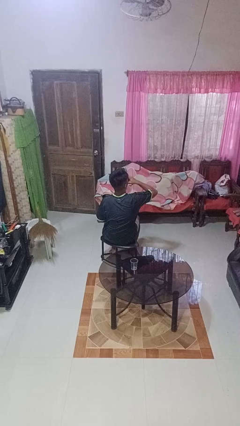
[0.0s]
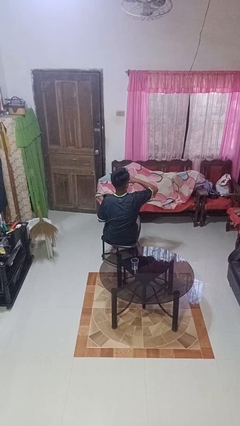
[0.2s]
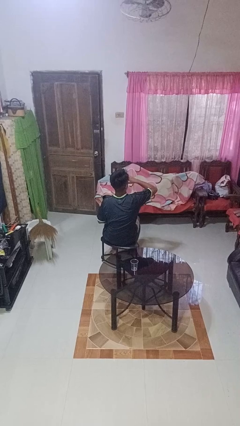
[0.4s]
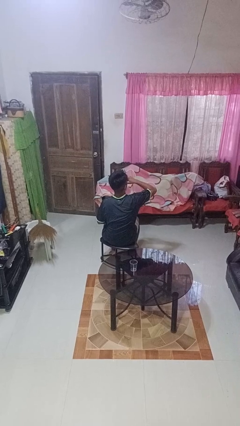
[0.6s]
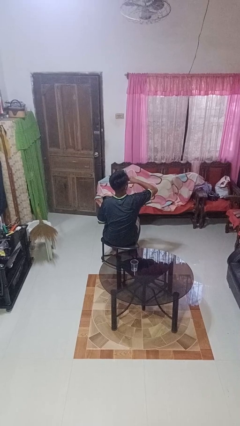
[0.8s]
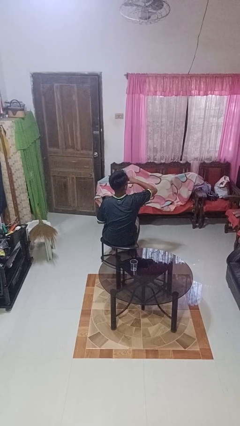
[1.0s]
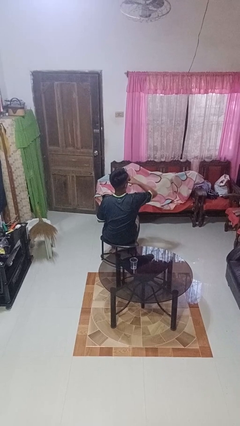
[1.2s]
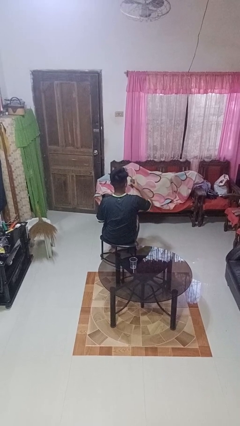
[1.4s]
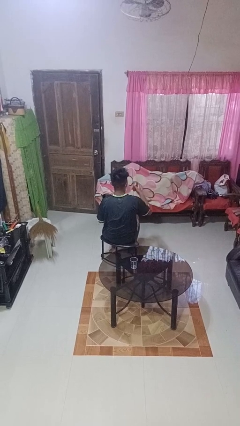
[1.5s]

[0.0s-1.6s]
person drinks from beverage can

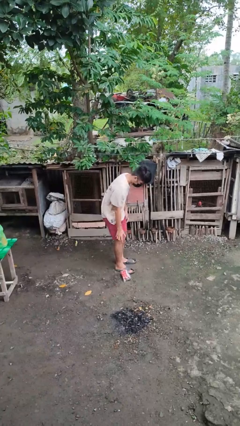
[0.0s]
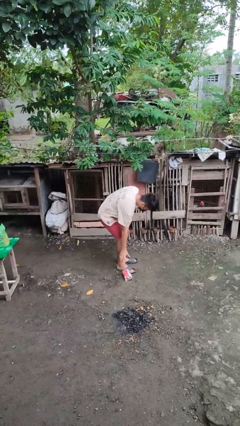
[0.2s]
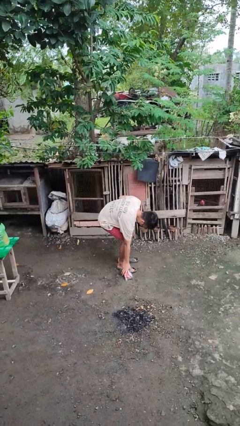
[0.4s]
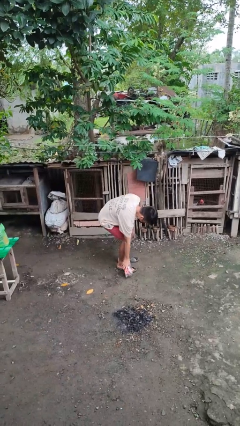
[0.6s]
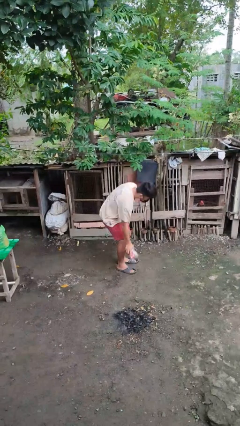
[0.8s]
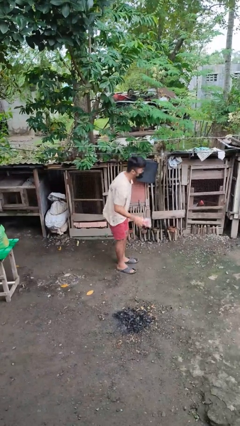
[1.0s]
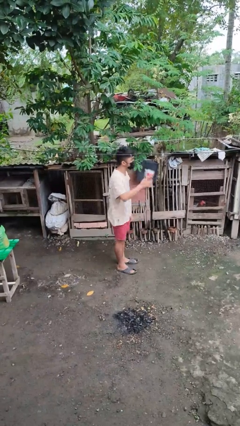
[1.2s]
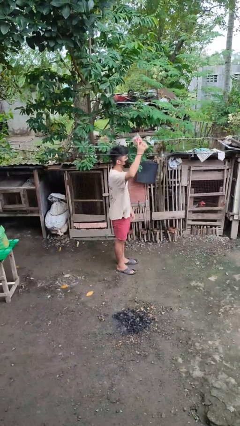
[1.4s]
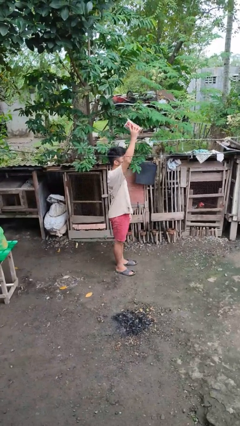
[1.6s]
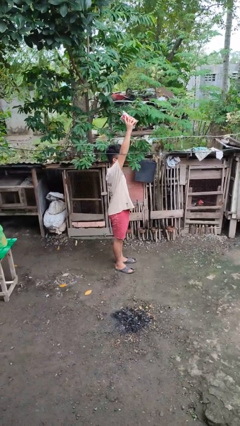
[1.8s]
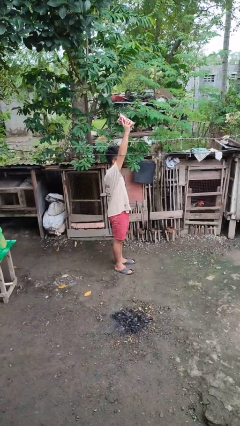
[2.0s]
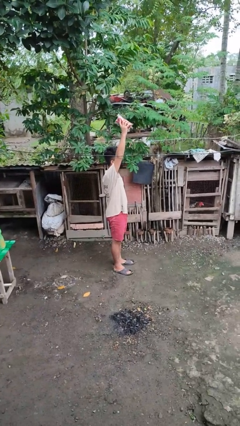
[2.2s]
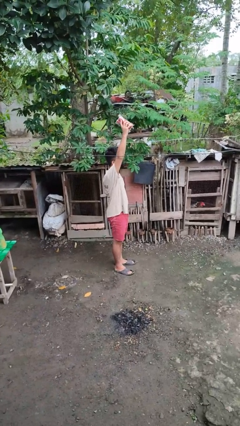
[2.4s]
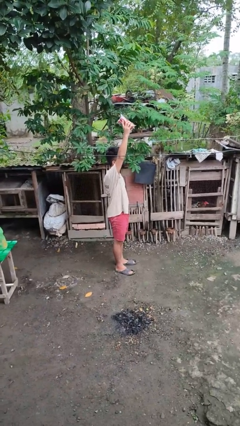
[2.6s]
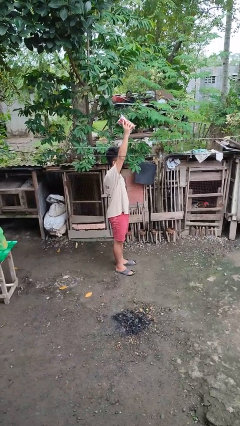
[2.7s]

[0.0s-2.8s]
person picks up object from floor

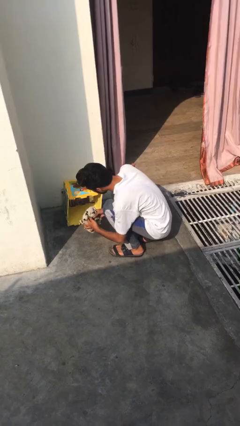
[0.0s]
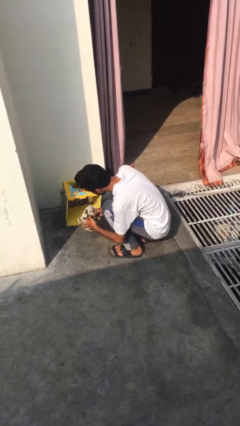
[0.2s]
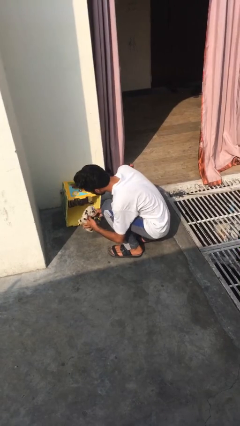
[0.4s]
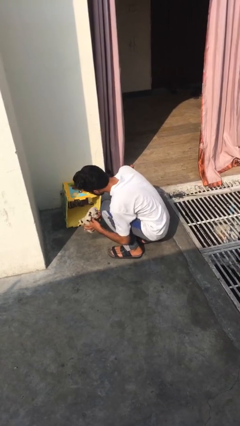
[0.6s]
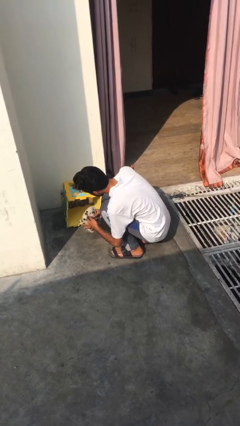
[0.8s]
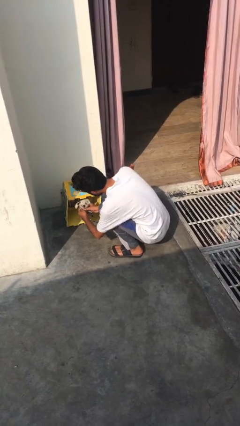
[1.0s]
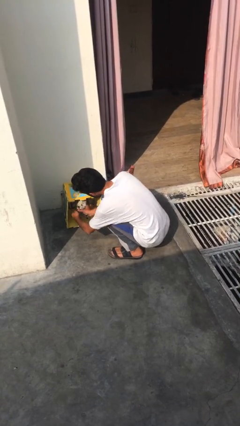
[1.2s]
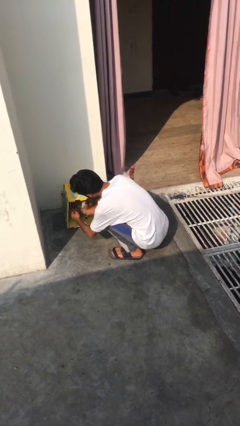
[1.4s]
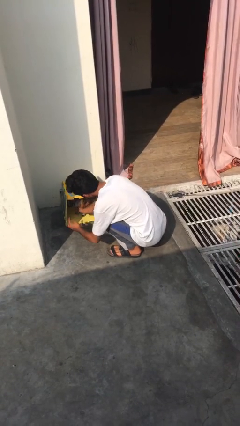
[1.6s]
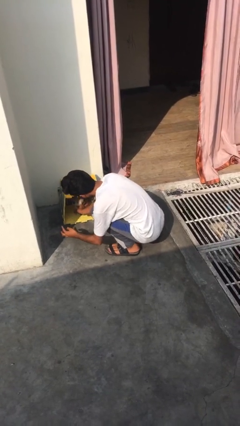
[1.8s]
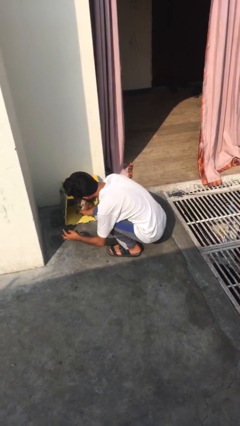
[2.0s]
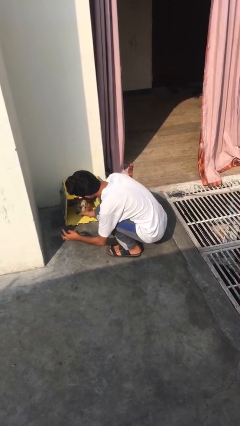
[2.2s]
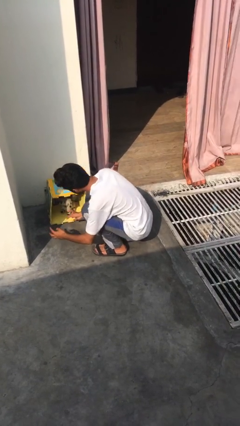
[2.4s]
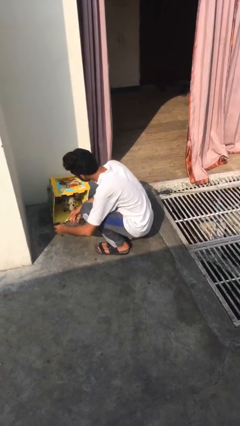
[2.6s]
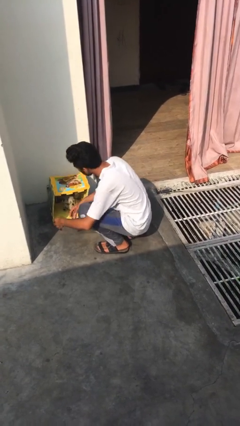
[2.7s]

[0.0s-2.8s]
person crates dog

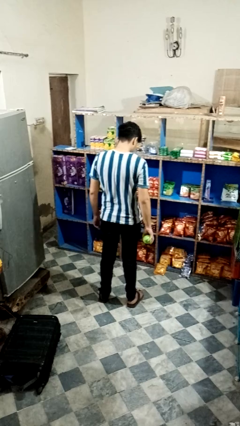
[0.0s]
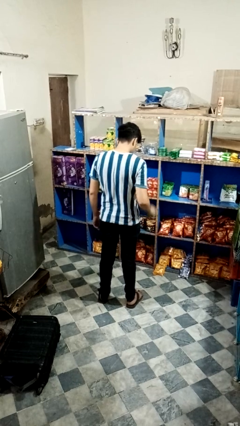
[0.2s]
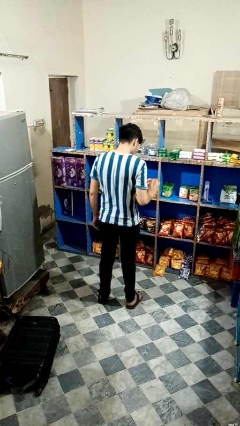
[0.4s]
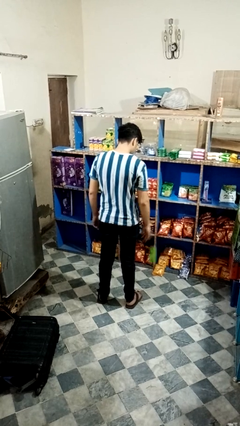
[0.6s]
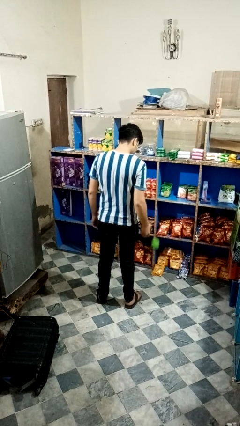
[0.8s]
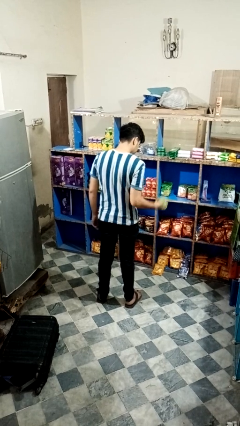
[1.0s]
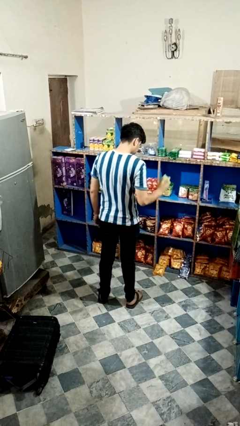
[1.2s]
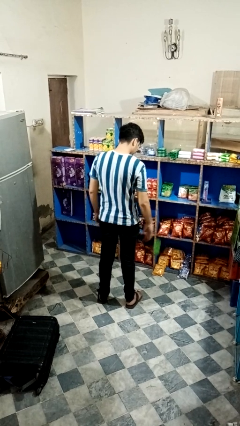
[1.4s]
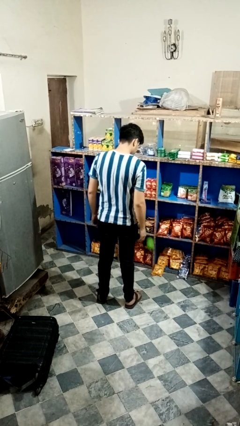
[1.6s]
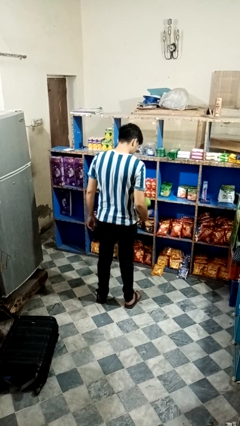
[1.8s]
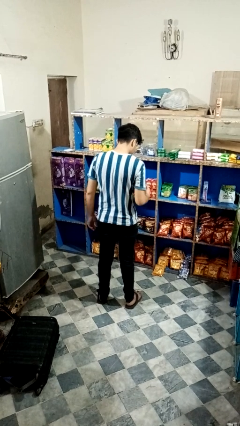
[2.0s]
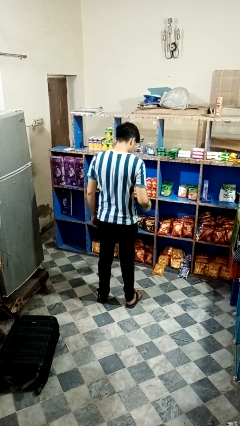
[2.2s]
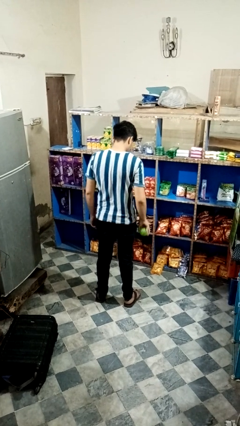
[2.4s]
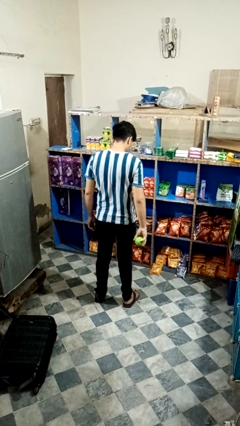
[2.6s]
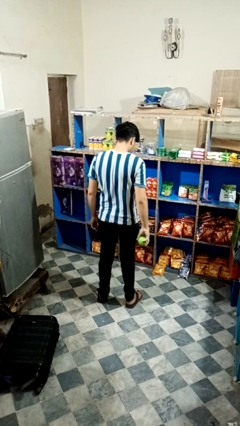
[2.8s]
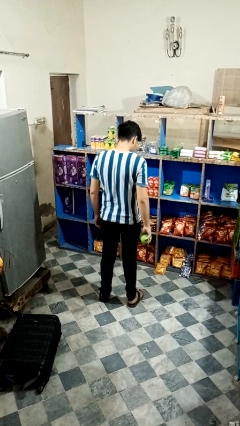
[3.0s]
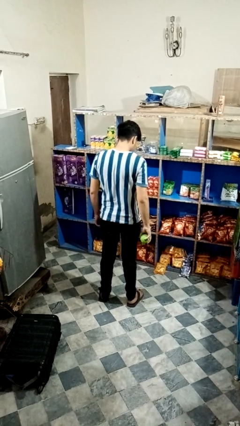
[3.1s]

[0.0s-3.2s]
person bounces ball on floor

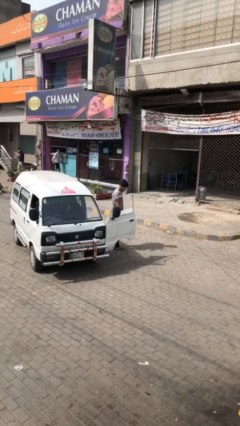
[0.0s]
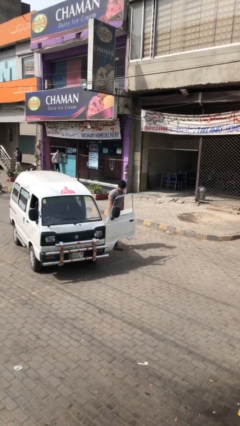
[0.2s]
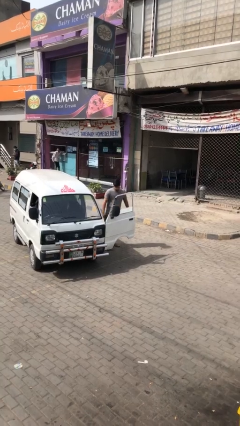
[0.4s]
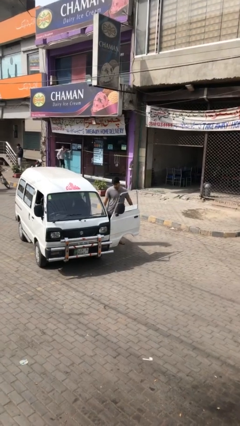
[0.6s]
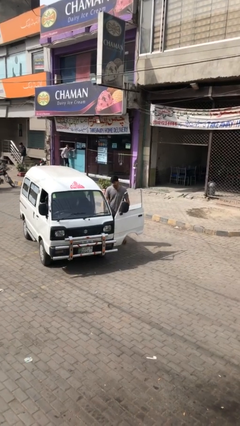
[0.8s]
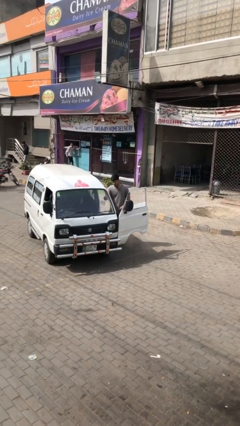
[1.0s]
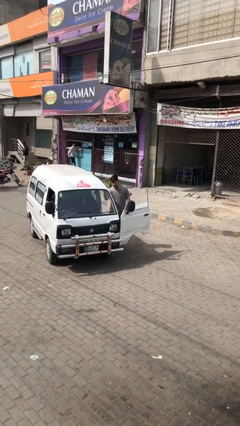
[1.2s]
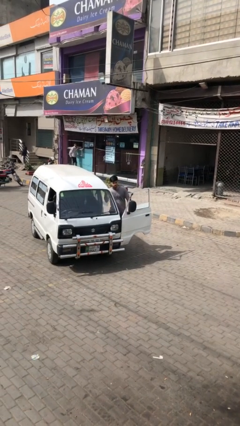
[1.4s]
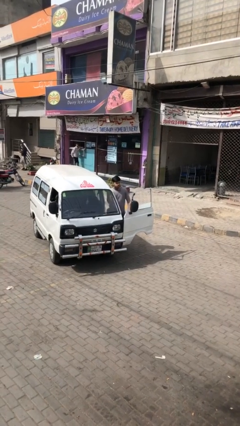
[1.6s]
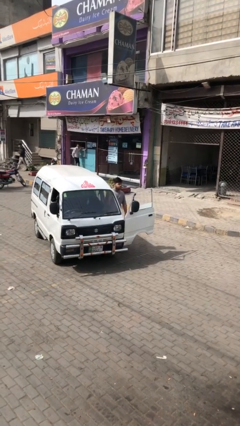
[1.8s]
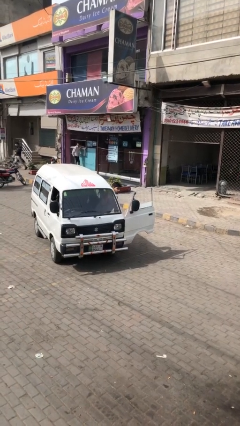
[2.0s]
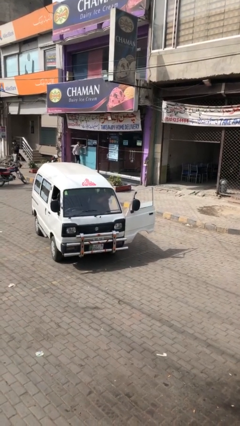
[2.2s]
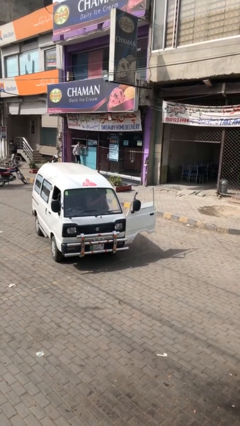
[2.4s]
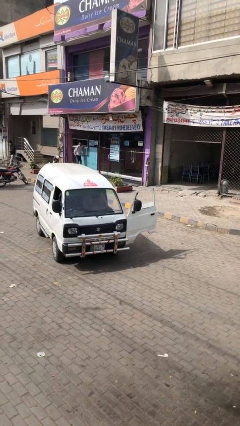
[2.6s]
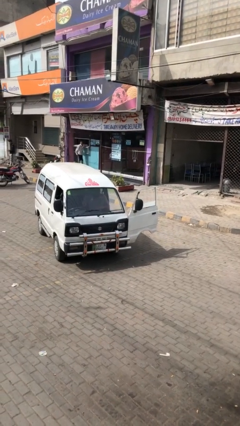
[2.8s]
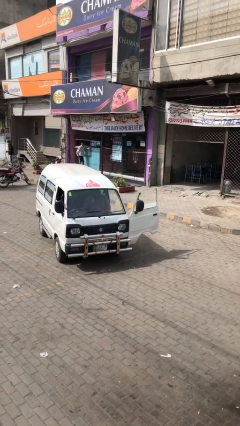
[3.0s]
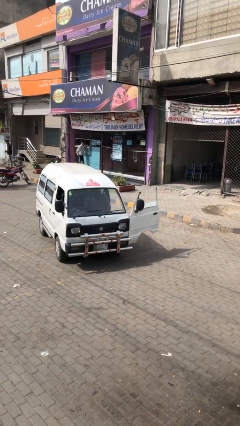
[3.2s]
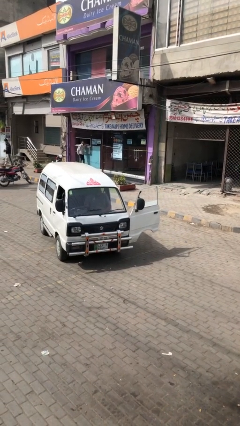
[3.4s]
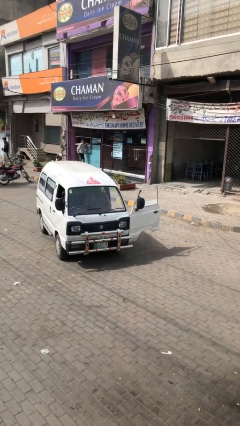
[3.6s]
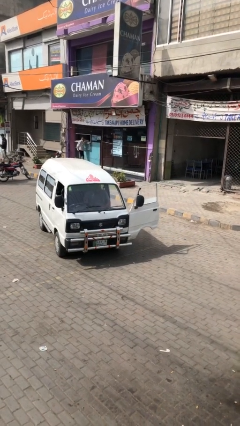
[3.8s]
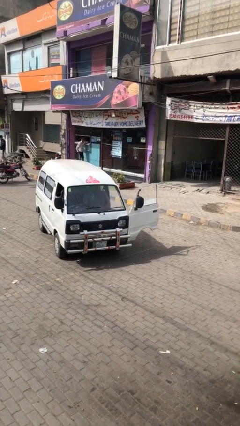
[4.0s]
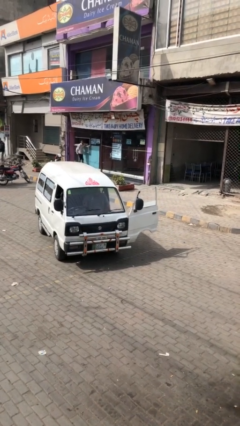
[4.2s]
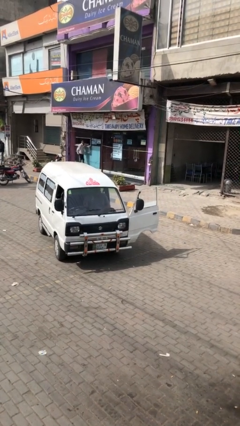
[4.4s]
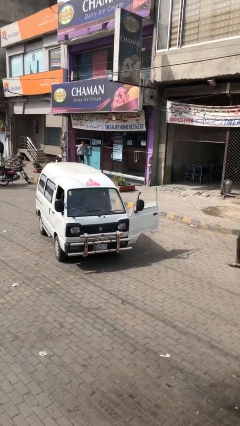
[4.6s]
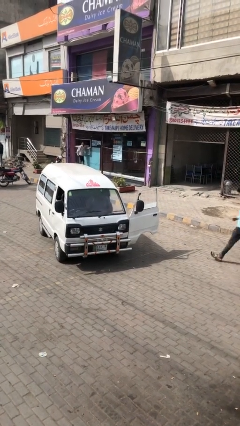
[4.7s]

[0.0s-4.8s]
person enters car

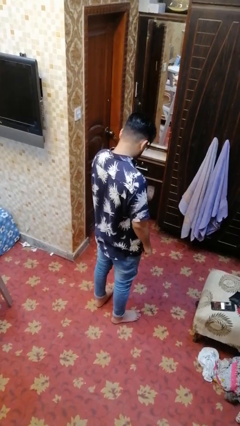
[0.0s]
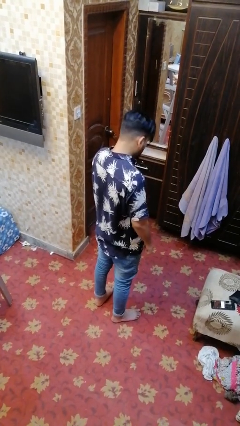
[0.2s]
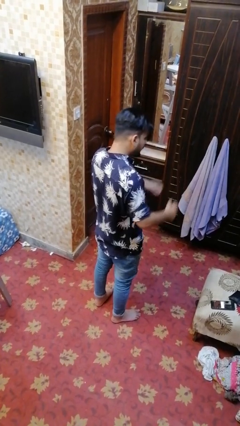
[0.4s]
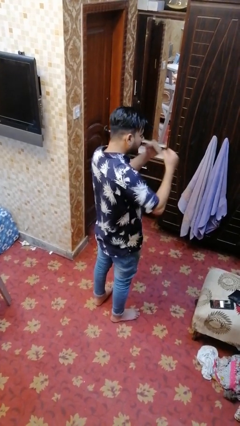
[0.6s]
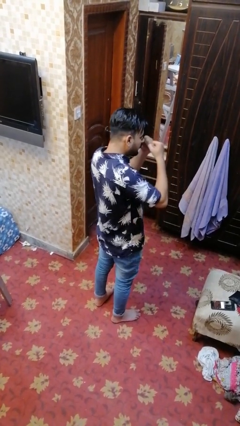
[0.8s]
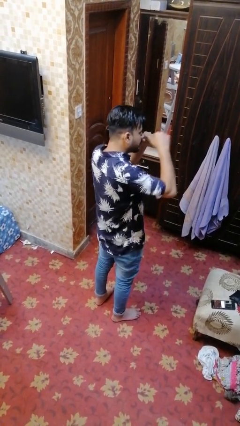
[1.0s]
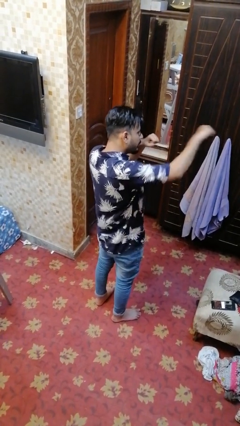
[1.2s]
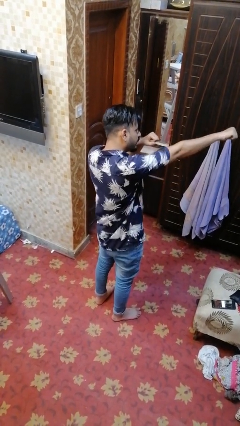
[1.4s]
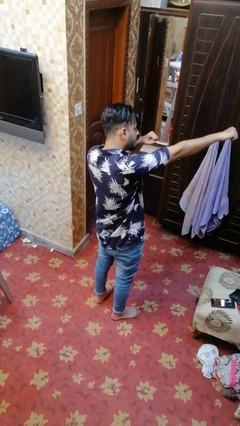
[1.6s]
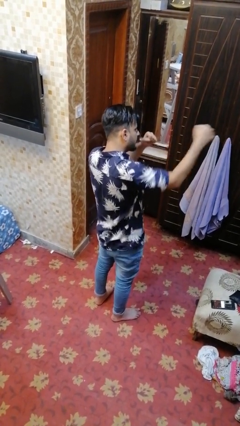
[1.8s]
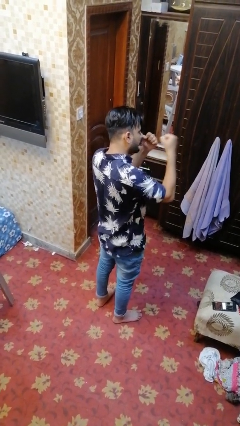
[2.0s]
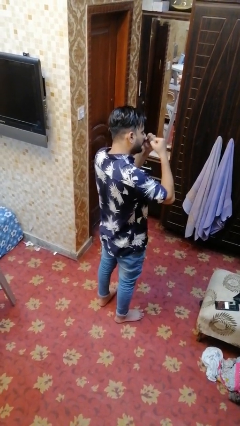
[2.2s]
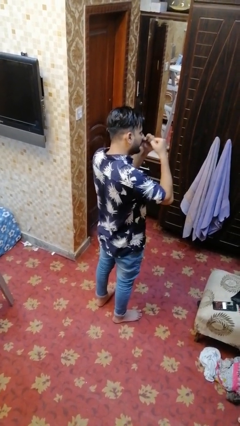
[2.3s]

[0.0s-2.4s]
person punches
